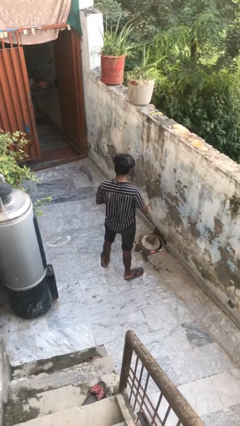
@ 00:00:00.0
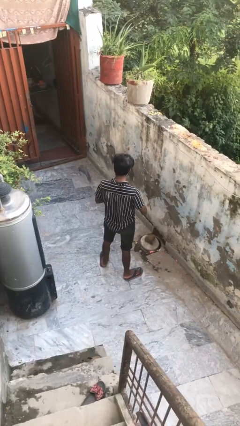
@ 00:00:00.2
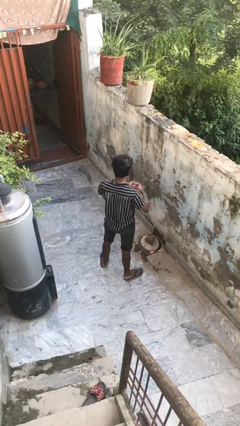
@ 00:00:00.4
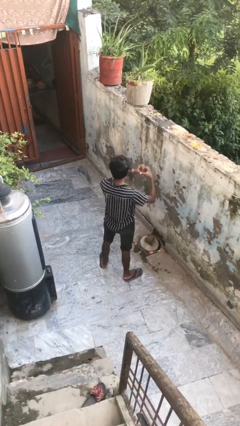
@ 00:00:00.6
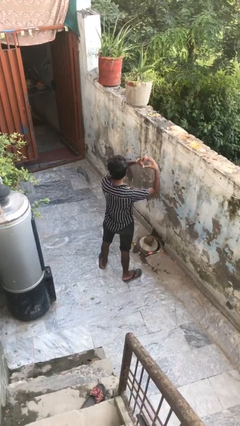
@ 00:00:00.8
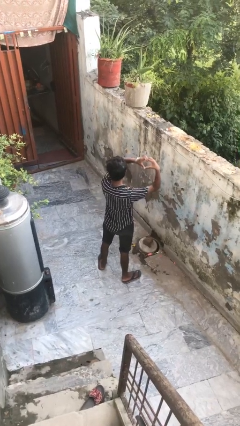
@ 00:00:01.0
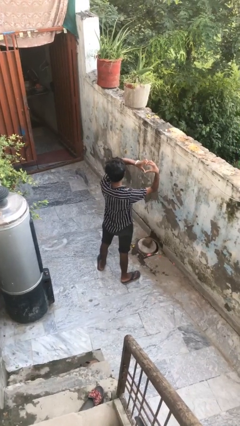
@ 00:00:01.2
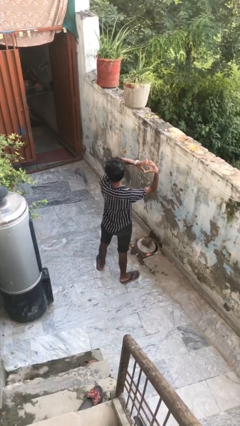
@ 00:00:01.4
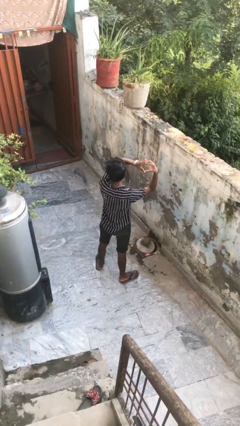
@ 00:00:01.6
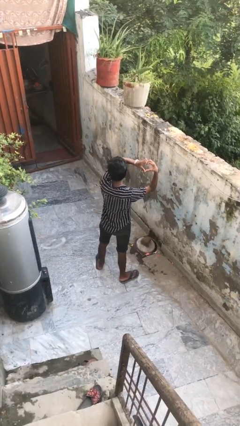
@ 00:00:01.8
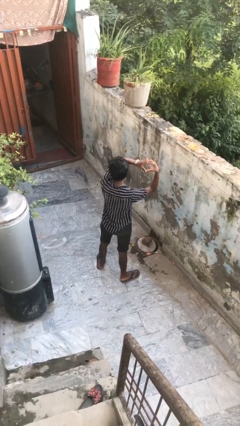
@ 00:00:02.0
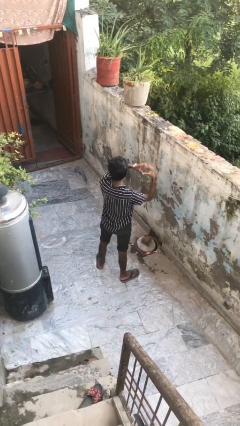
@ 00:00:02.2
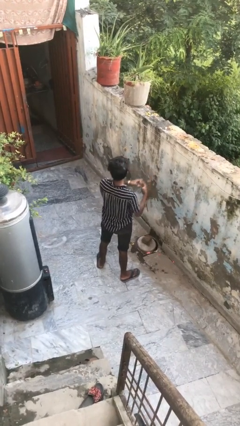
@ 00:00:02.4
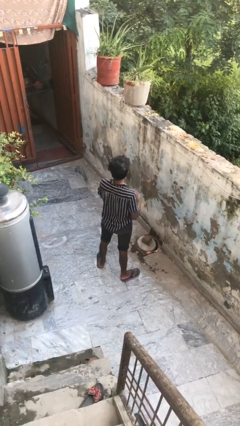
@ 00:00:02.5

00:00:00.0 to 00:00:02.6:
person gestures heart

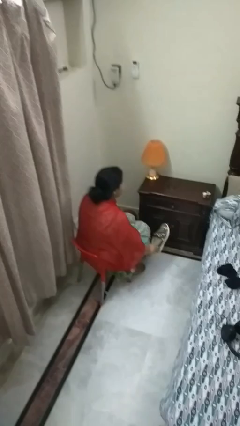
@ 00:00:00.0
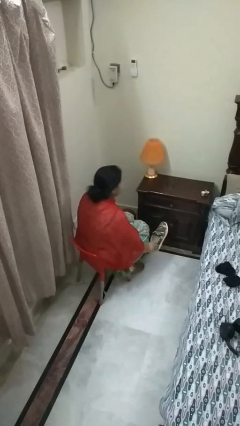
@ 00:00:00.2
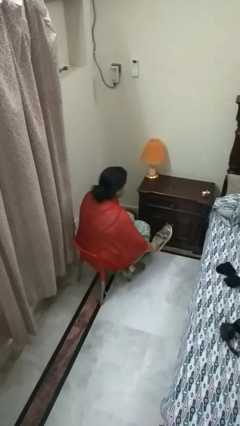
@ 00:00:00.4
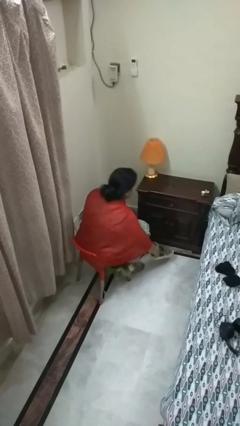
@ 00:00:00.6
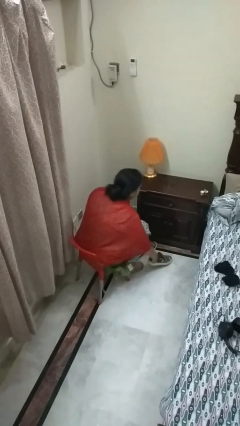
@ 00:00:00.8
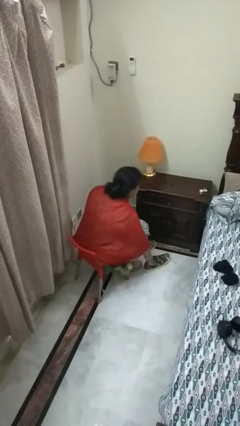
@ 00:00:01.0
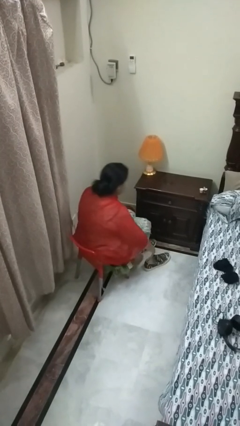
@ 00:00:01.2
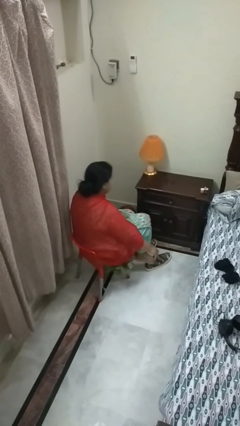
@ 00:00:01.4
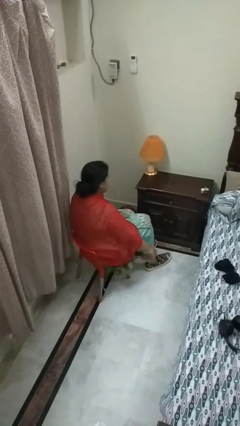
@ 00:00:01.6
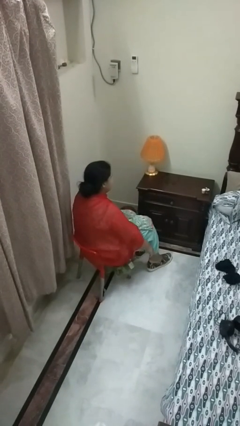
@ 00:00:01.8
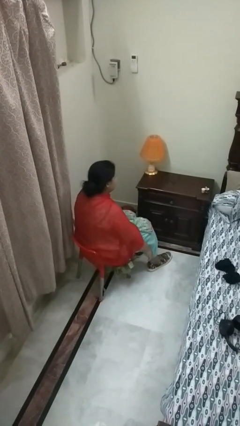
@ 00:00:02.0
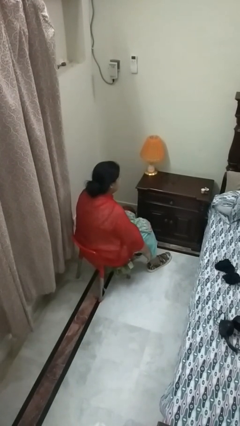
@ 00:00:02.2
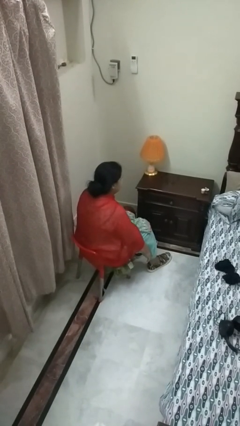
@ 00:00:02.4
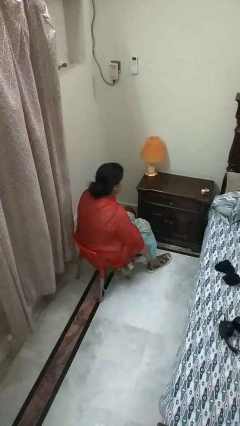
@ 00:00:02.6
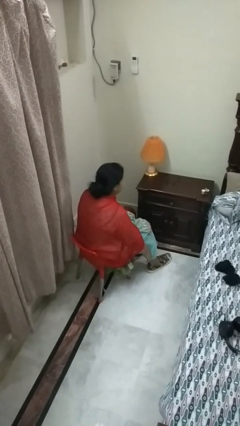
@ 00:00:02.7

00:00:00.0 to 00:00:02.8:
person puts on shoes

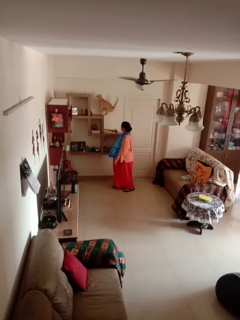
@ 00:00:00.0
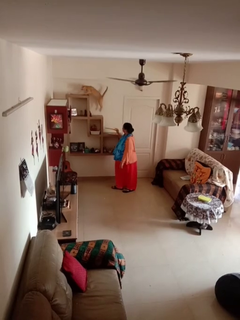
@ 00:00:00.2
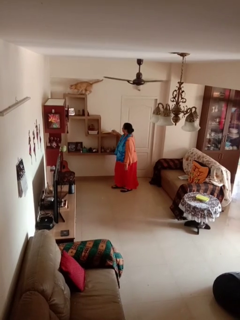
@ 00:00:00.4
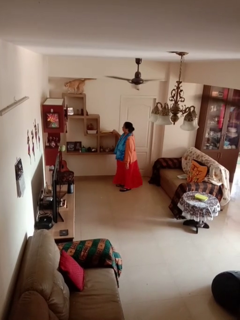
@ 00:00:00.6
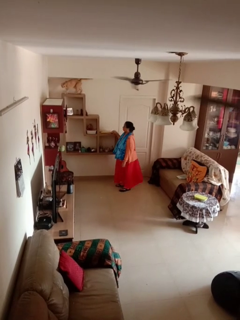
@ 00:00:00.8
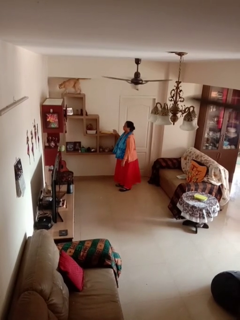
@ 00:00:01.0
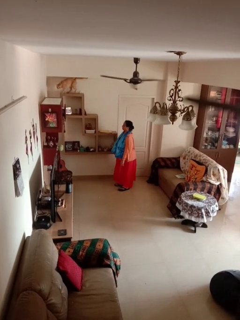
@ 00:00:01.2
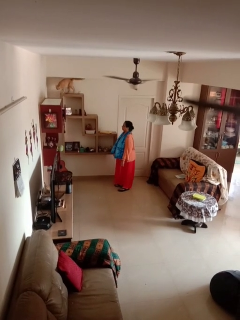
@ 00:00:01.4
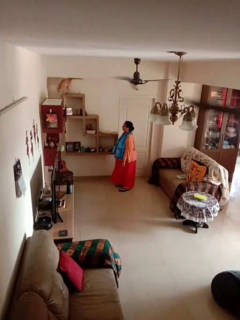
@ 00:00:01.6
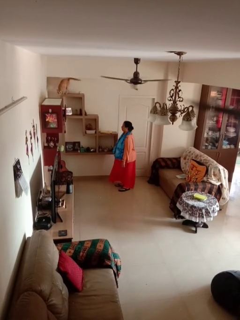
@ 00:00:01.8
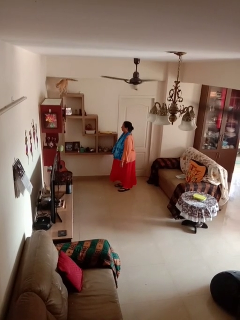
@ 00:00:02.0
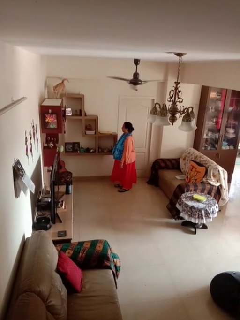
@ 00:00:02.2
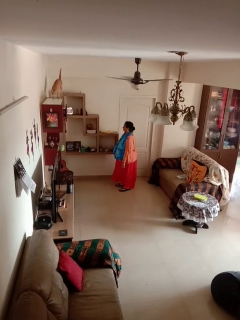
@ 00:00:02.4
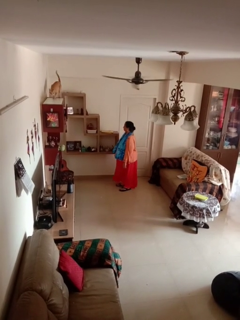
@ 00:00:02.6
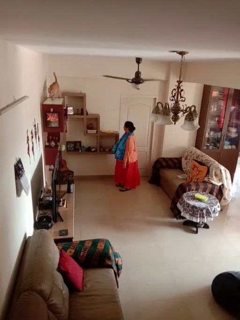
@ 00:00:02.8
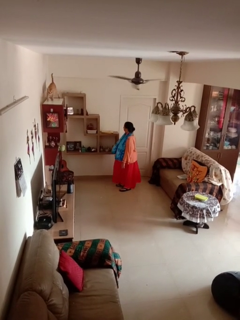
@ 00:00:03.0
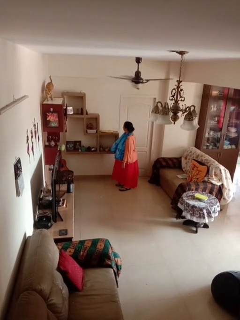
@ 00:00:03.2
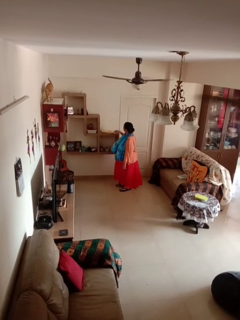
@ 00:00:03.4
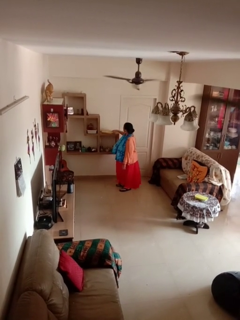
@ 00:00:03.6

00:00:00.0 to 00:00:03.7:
person puts down object on shelf

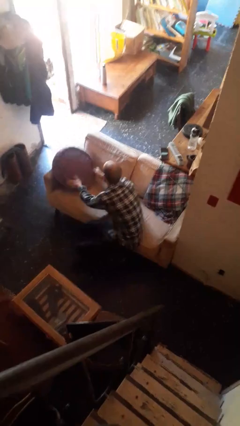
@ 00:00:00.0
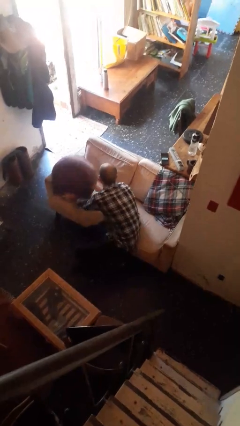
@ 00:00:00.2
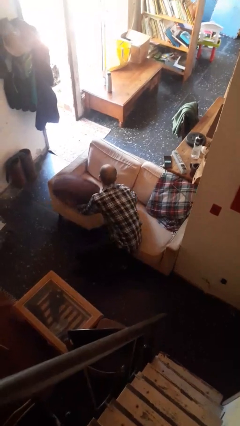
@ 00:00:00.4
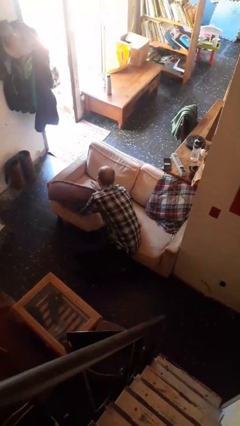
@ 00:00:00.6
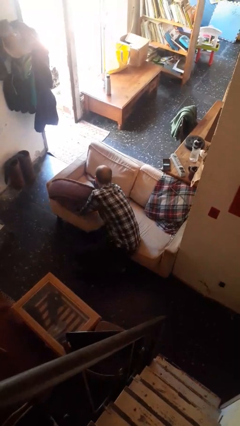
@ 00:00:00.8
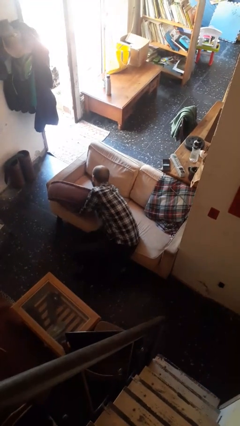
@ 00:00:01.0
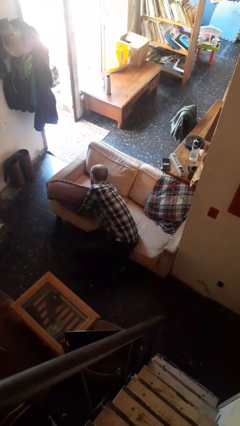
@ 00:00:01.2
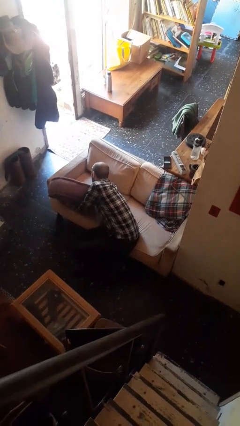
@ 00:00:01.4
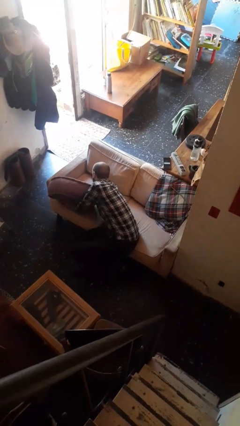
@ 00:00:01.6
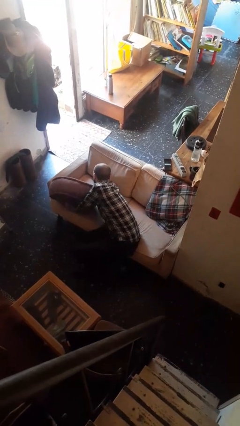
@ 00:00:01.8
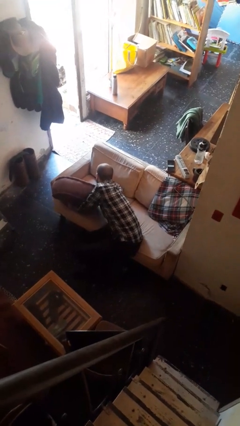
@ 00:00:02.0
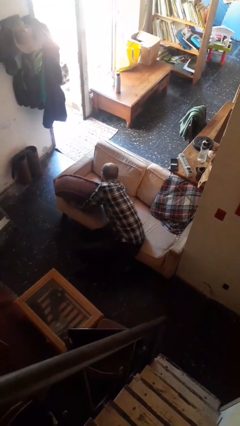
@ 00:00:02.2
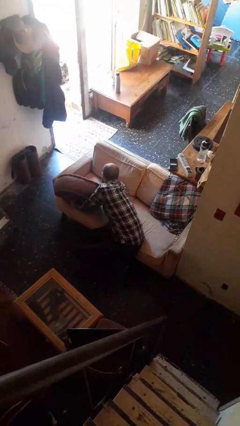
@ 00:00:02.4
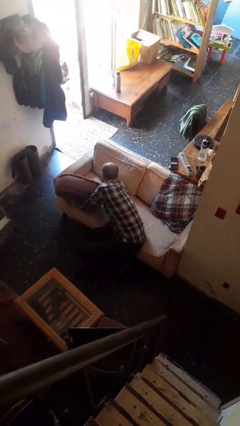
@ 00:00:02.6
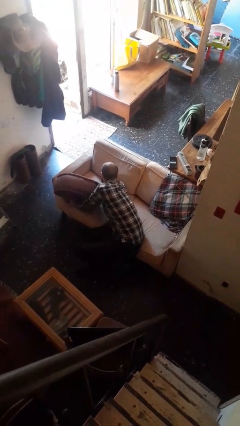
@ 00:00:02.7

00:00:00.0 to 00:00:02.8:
person searches in couch

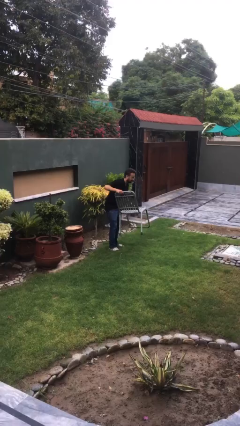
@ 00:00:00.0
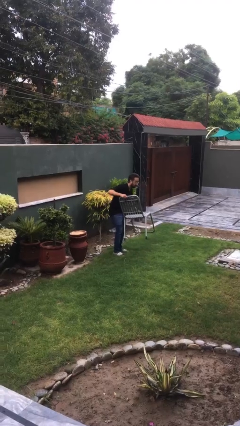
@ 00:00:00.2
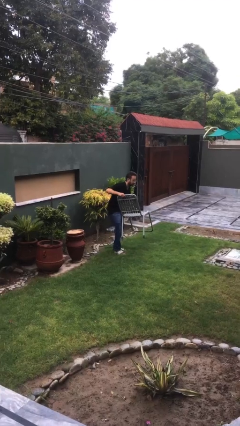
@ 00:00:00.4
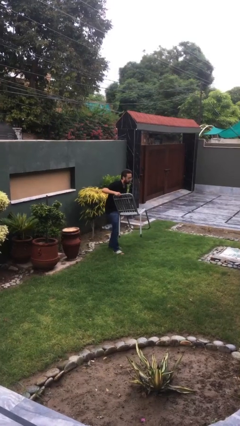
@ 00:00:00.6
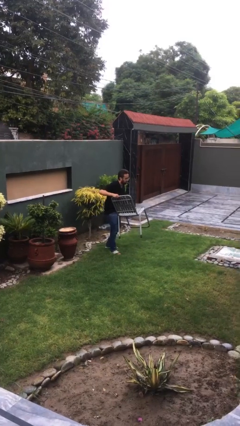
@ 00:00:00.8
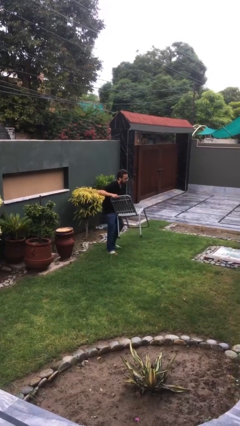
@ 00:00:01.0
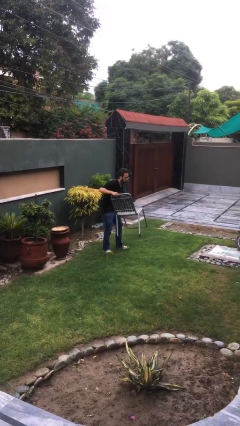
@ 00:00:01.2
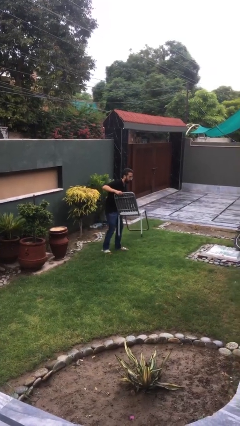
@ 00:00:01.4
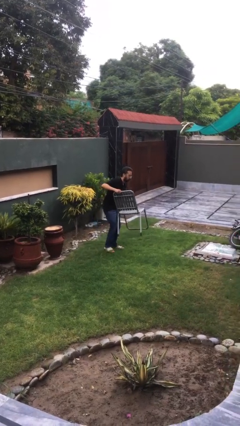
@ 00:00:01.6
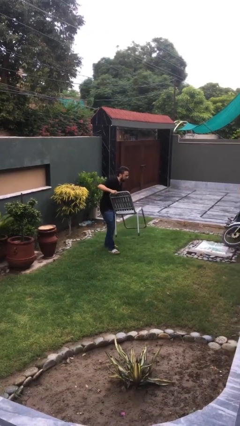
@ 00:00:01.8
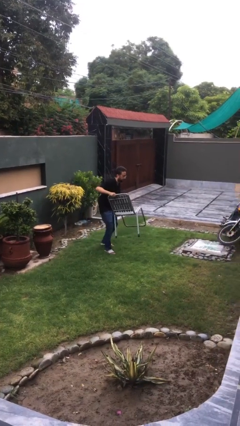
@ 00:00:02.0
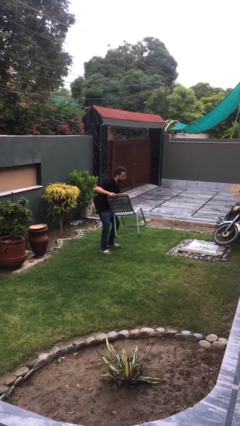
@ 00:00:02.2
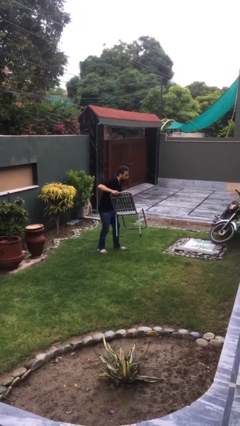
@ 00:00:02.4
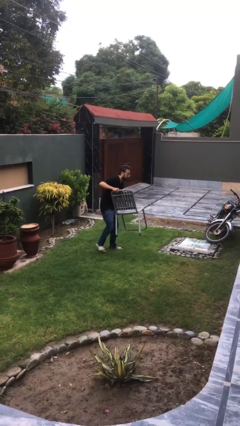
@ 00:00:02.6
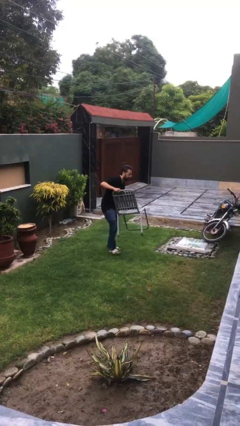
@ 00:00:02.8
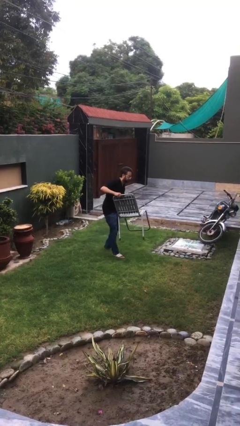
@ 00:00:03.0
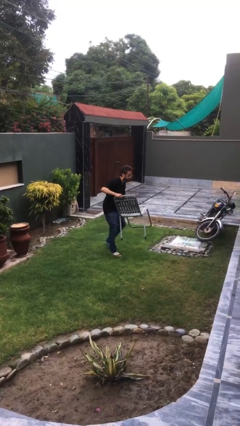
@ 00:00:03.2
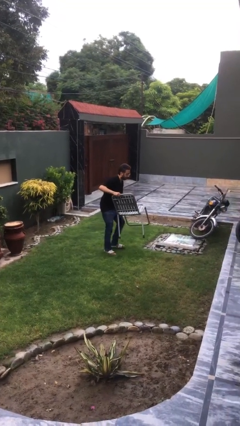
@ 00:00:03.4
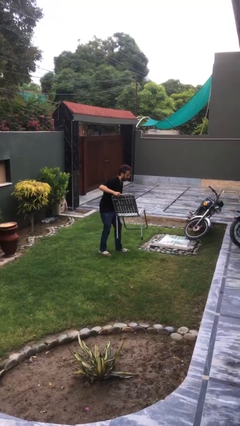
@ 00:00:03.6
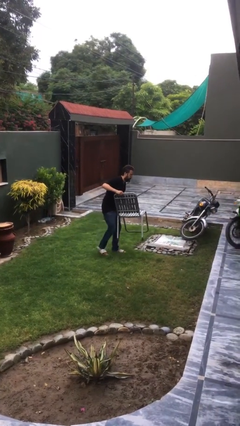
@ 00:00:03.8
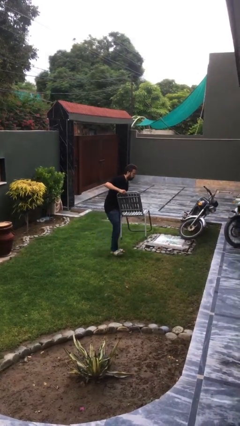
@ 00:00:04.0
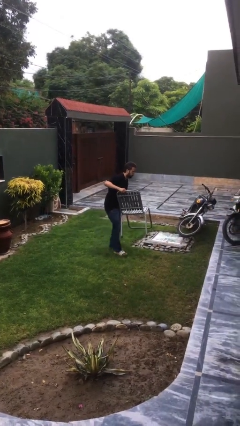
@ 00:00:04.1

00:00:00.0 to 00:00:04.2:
person carries heavy object

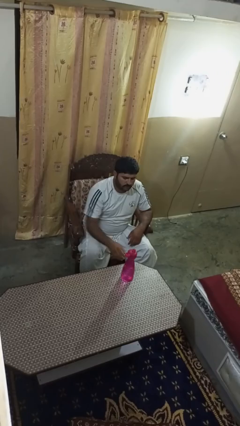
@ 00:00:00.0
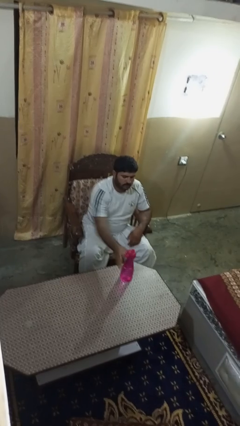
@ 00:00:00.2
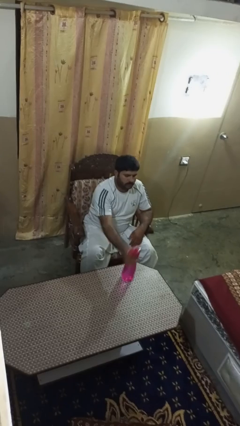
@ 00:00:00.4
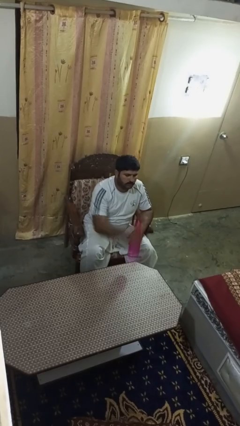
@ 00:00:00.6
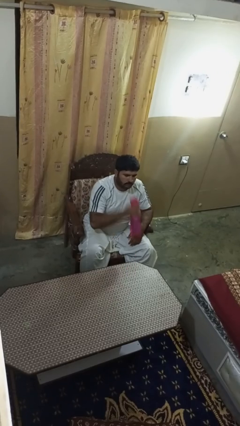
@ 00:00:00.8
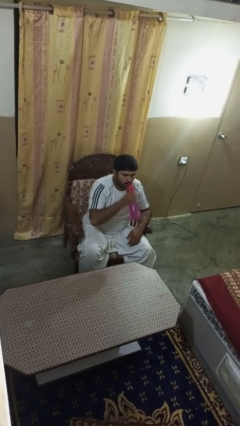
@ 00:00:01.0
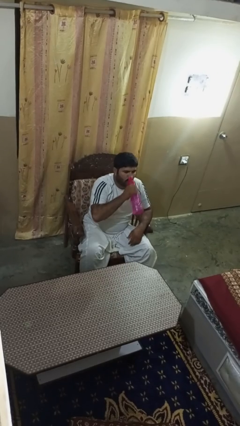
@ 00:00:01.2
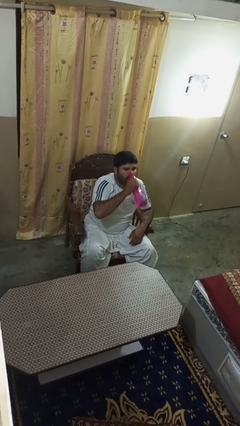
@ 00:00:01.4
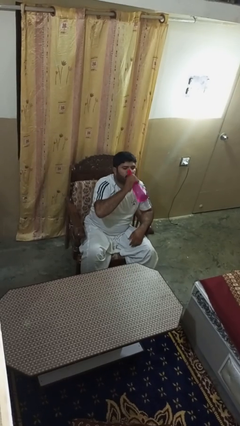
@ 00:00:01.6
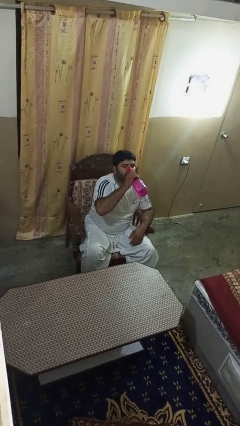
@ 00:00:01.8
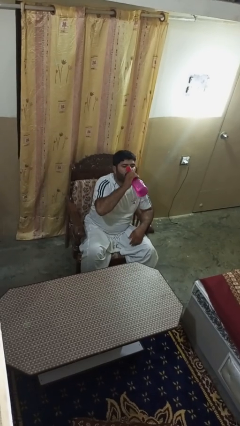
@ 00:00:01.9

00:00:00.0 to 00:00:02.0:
person drinks from bottle
